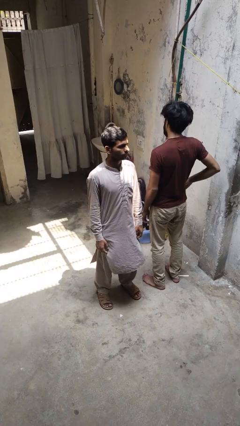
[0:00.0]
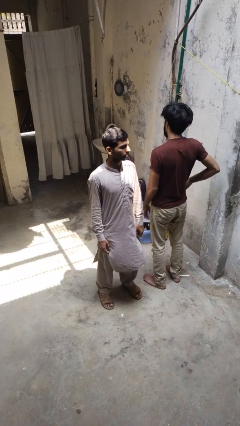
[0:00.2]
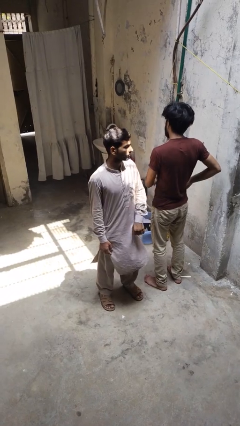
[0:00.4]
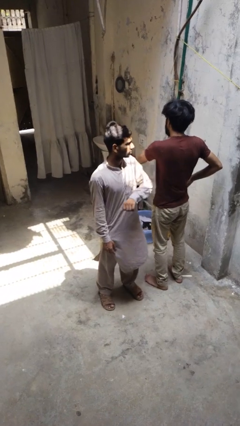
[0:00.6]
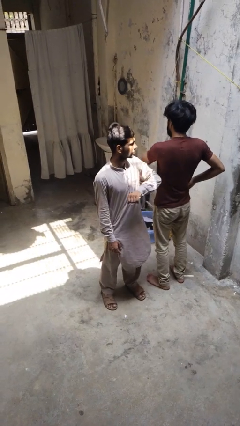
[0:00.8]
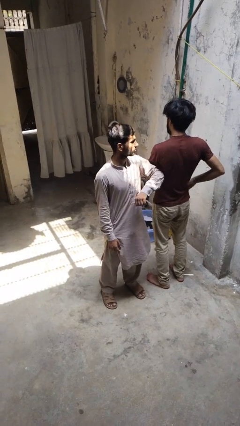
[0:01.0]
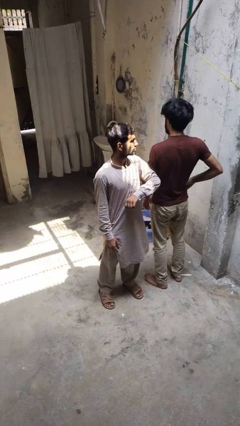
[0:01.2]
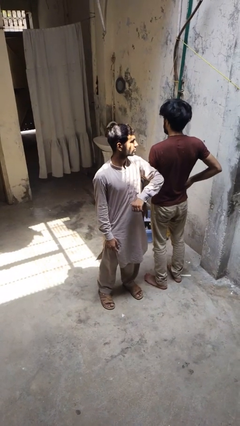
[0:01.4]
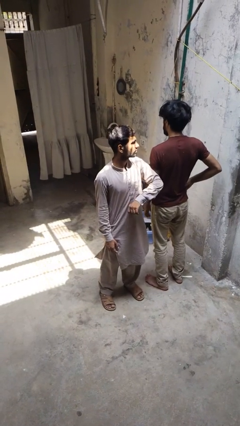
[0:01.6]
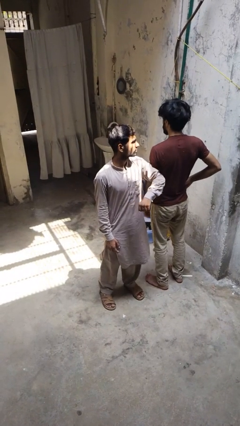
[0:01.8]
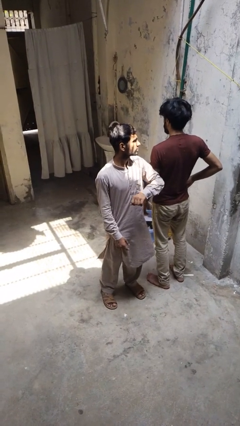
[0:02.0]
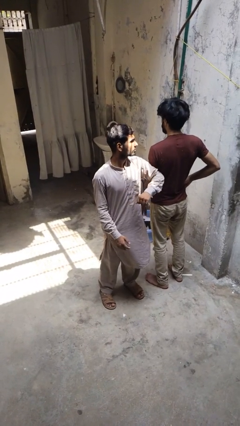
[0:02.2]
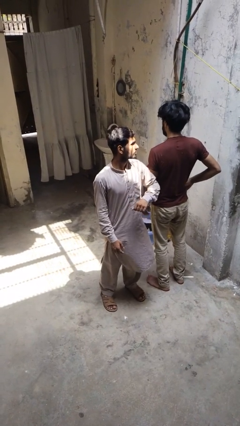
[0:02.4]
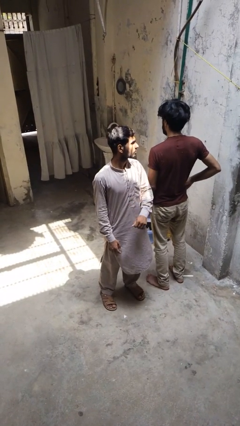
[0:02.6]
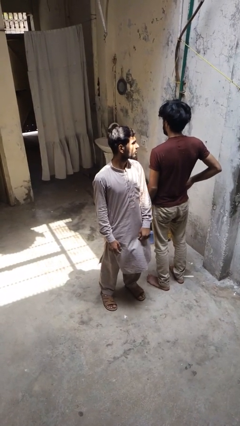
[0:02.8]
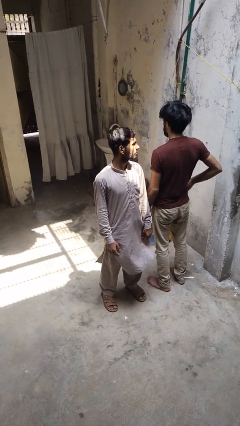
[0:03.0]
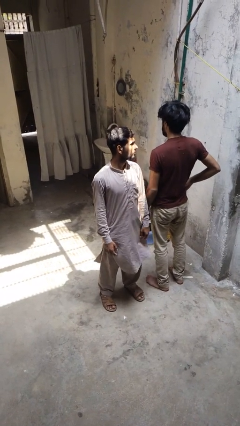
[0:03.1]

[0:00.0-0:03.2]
person nudges person with elbow

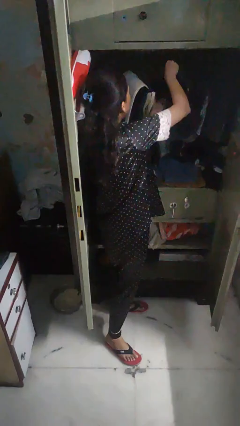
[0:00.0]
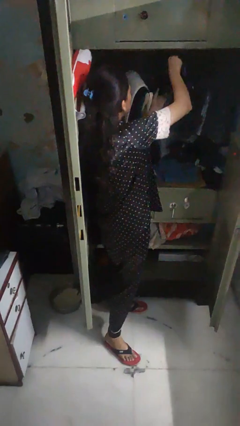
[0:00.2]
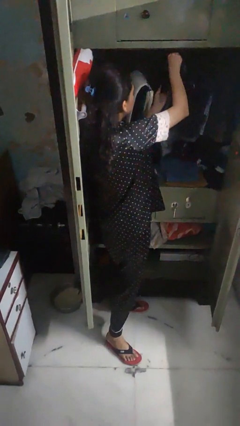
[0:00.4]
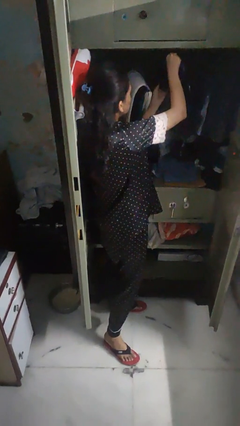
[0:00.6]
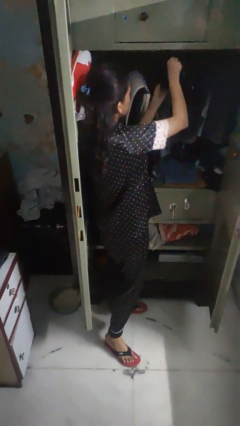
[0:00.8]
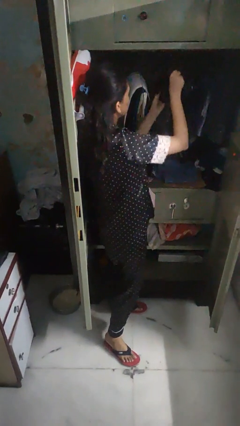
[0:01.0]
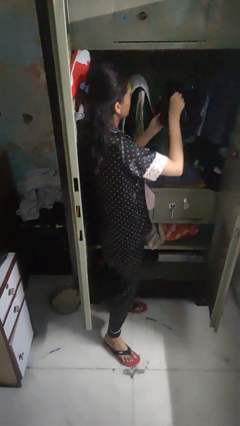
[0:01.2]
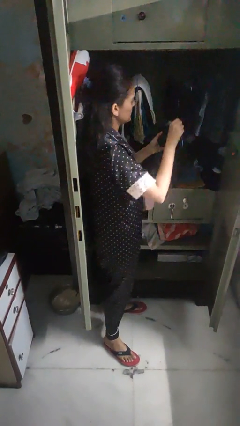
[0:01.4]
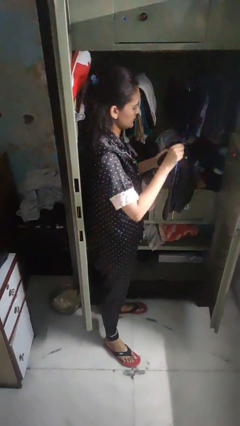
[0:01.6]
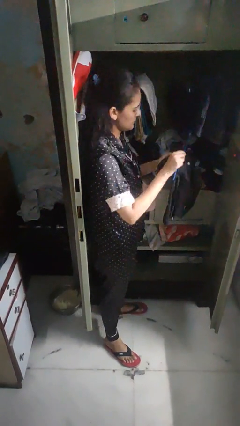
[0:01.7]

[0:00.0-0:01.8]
person takes clothes from closet

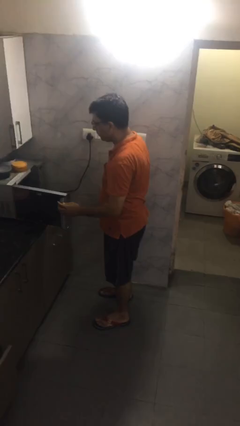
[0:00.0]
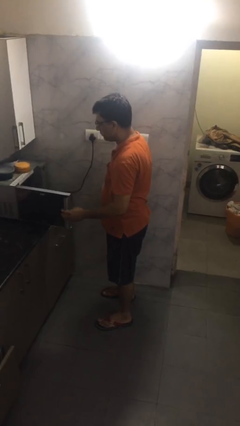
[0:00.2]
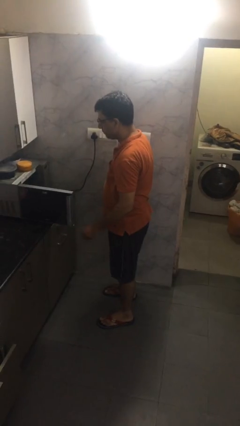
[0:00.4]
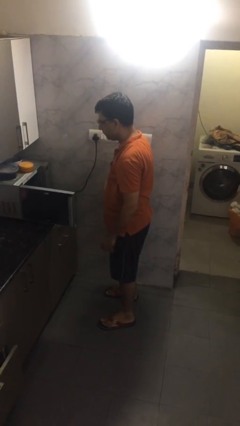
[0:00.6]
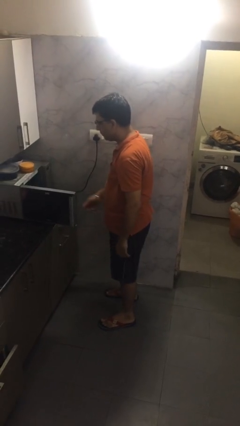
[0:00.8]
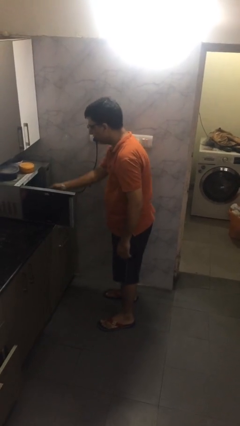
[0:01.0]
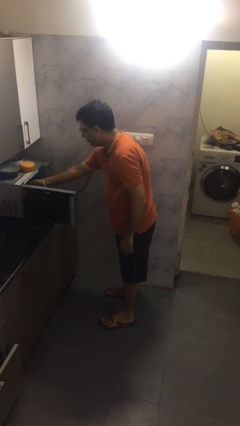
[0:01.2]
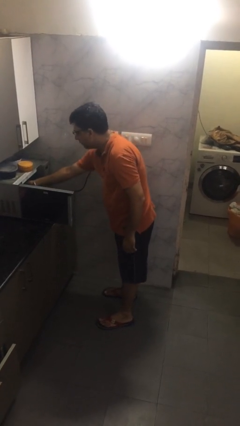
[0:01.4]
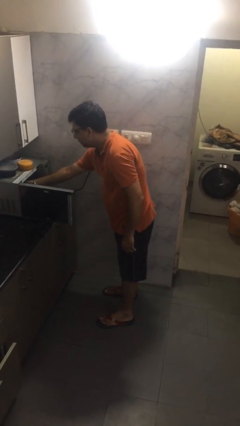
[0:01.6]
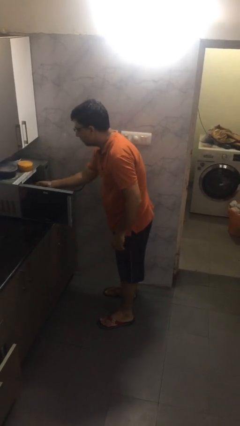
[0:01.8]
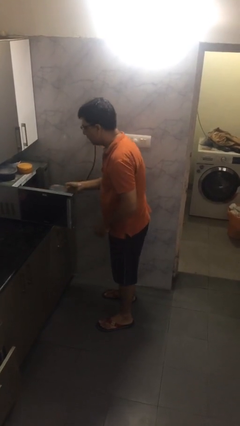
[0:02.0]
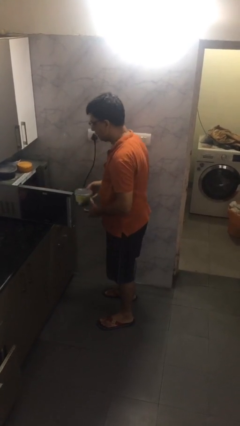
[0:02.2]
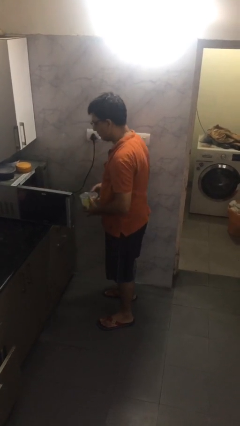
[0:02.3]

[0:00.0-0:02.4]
person takes object from microwave

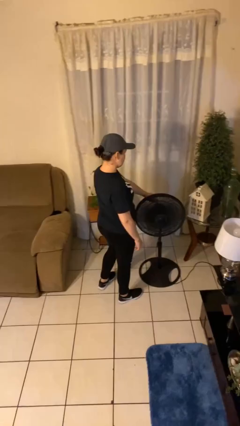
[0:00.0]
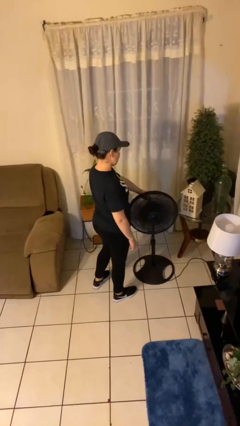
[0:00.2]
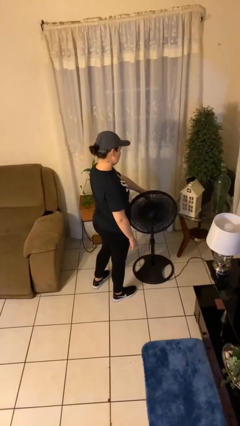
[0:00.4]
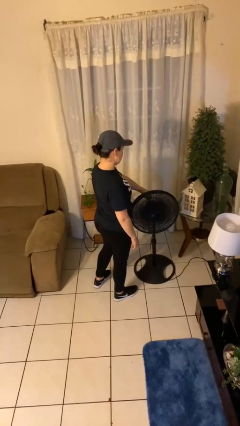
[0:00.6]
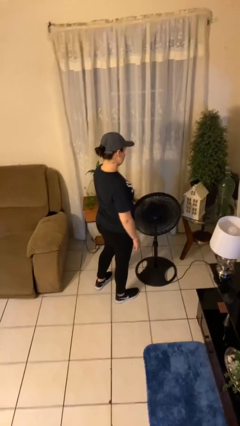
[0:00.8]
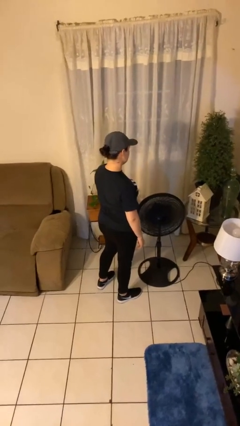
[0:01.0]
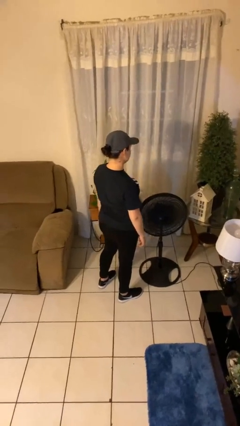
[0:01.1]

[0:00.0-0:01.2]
person turns off fan

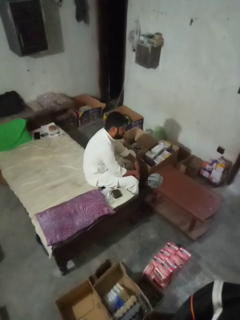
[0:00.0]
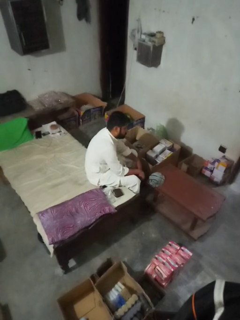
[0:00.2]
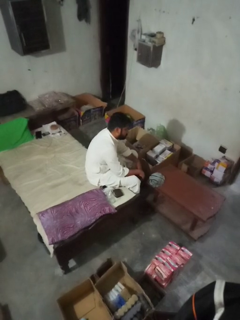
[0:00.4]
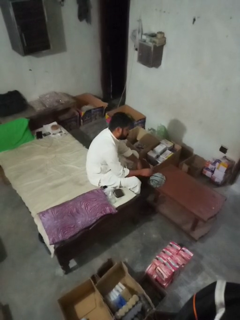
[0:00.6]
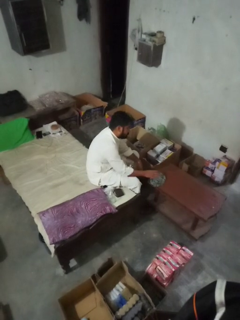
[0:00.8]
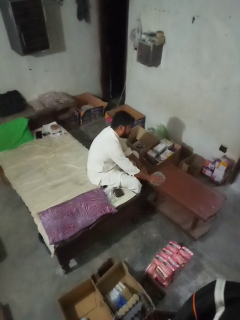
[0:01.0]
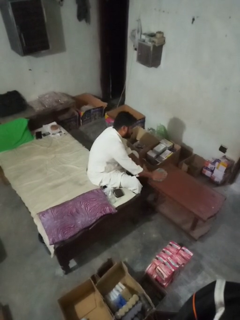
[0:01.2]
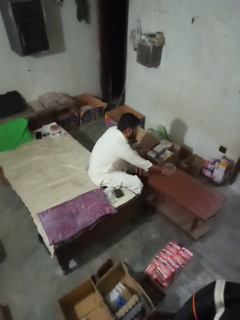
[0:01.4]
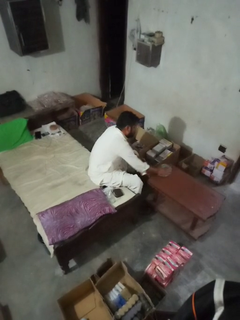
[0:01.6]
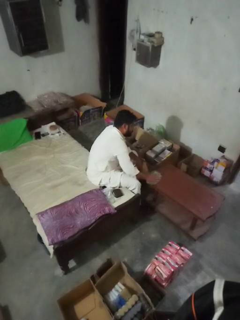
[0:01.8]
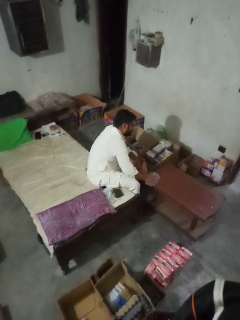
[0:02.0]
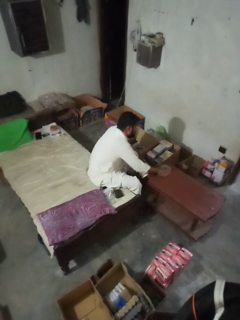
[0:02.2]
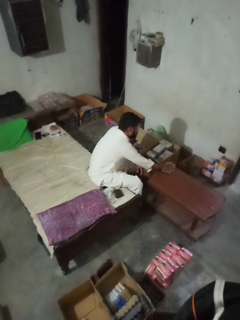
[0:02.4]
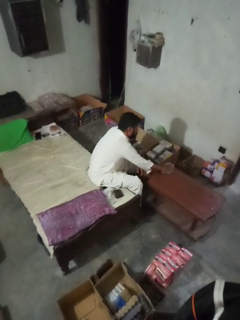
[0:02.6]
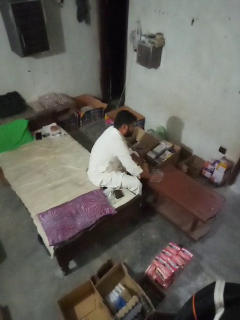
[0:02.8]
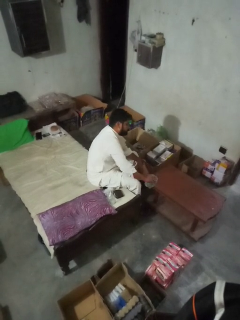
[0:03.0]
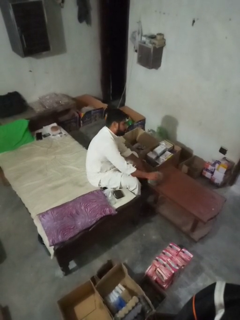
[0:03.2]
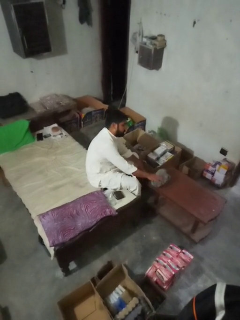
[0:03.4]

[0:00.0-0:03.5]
person cleans table with rag

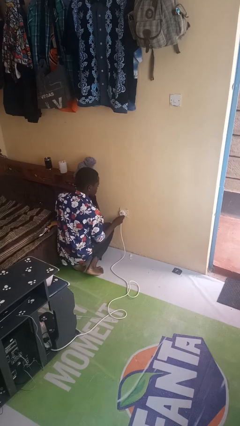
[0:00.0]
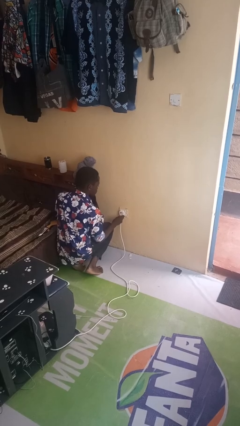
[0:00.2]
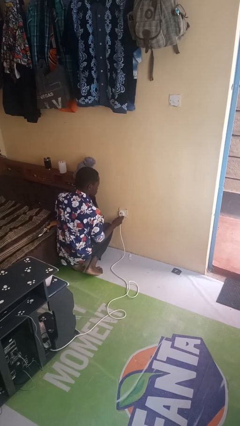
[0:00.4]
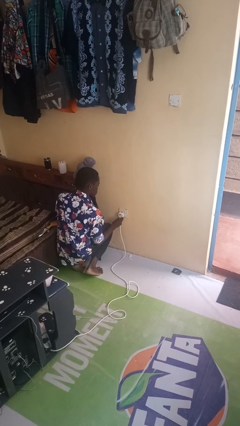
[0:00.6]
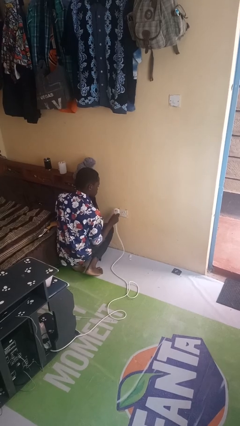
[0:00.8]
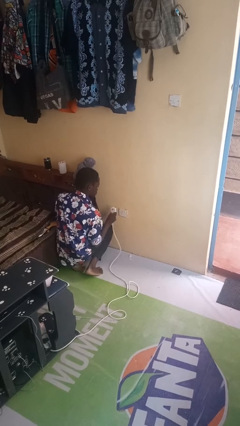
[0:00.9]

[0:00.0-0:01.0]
person unplugs from electrical socket

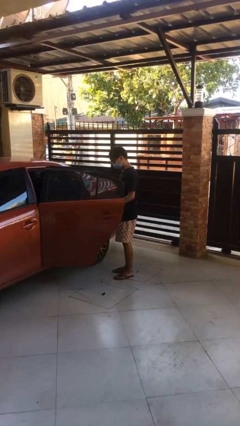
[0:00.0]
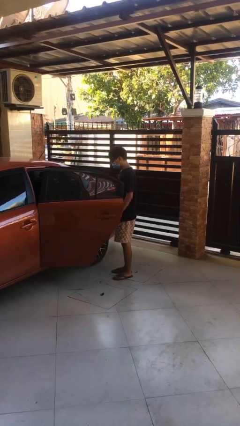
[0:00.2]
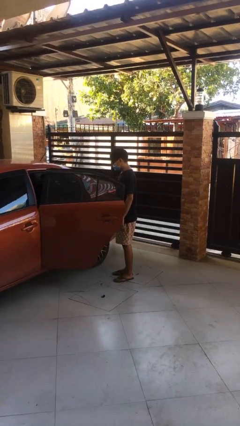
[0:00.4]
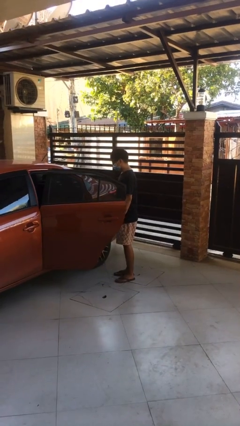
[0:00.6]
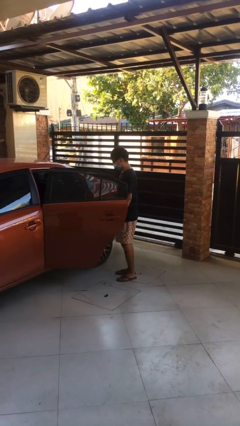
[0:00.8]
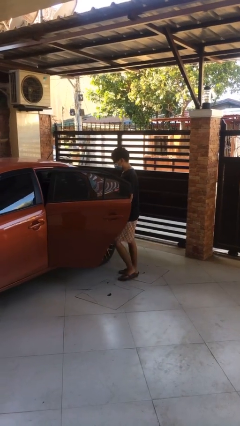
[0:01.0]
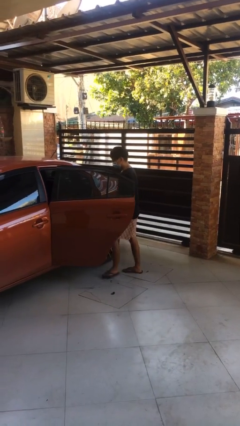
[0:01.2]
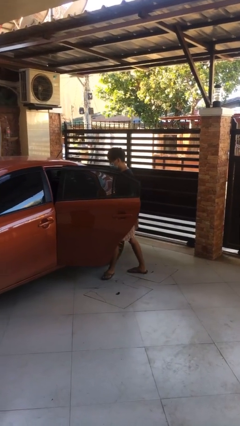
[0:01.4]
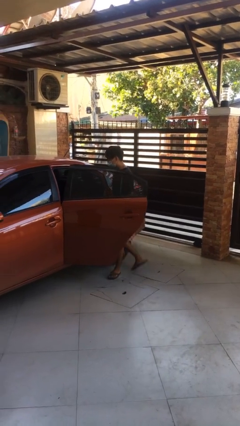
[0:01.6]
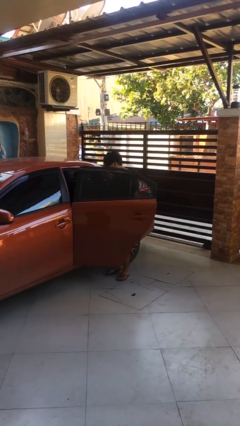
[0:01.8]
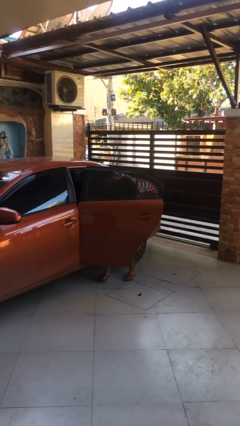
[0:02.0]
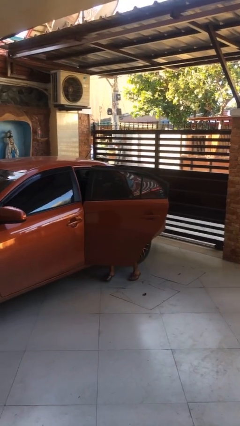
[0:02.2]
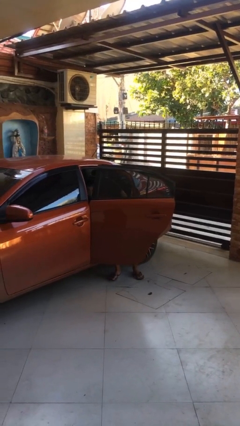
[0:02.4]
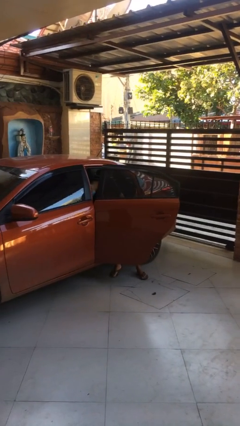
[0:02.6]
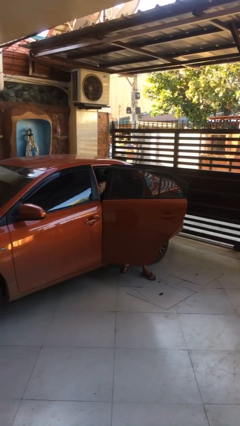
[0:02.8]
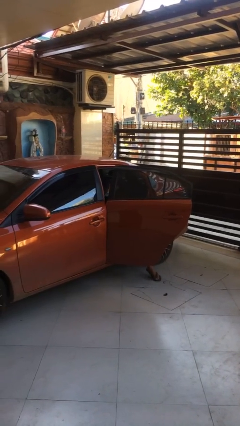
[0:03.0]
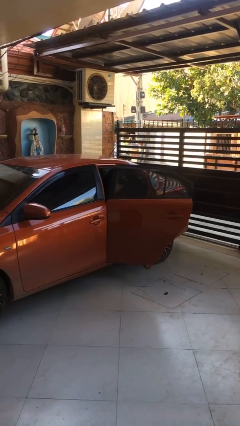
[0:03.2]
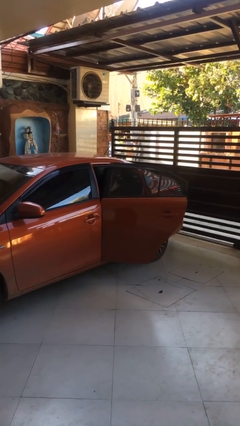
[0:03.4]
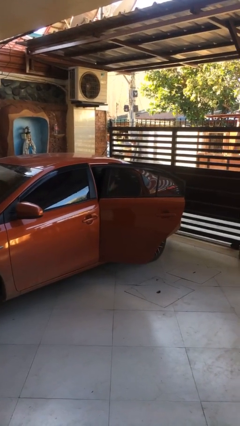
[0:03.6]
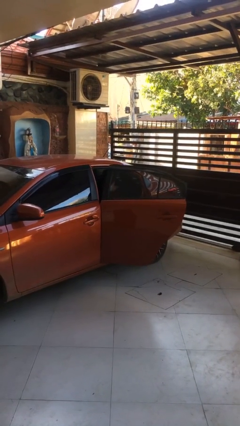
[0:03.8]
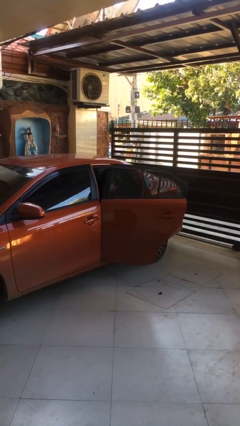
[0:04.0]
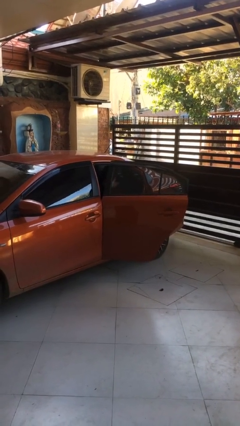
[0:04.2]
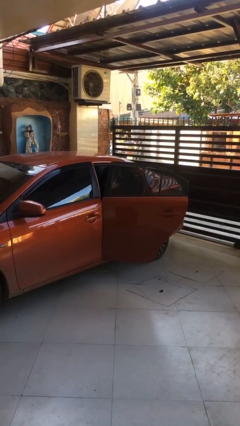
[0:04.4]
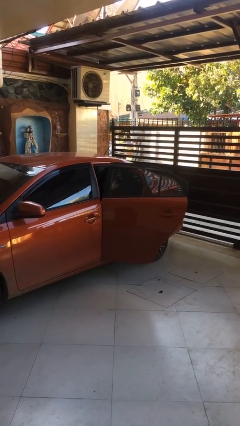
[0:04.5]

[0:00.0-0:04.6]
person enters car

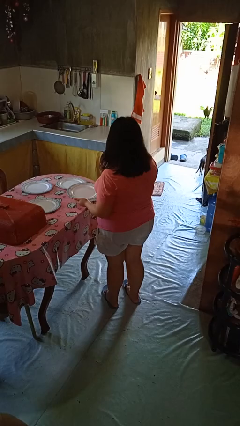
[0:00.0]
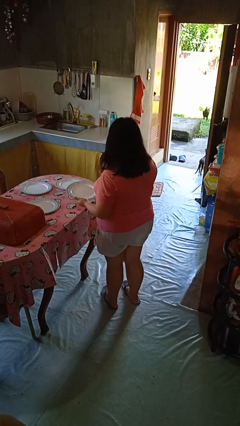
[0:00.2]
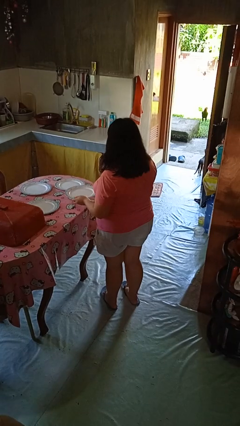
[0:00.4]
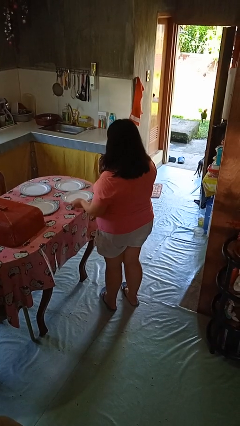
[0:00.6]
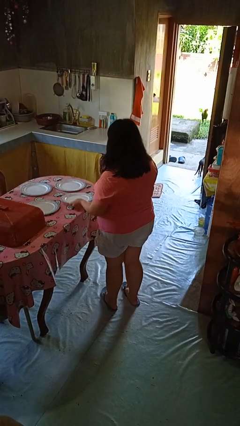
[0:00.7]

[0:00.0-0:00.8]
person sets table
